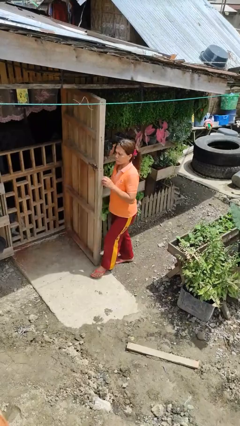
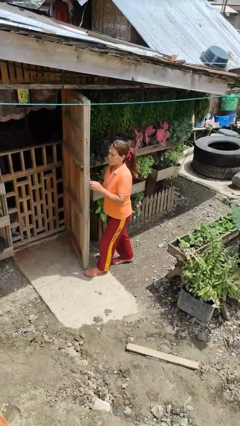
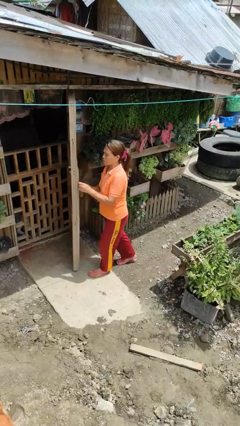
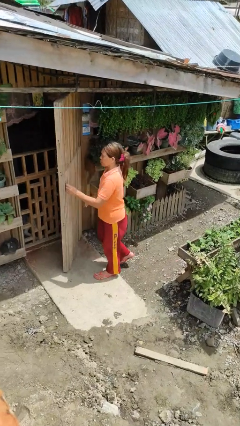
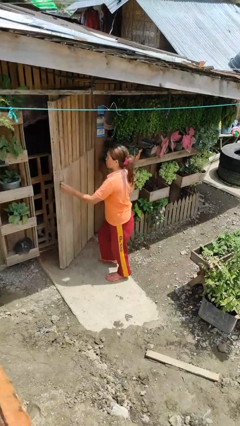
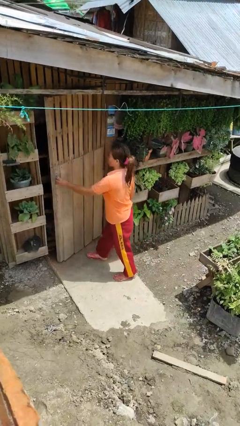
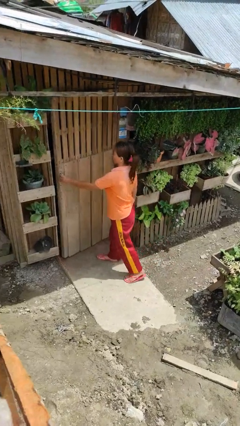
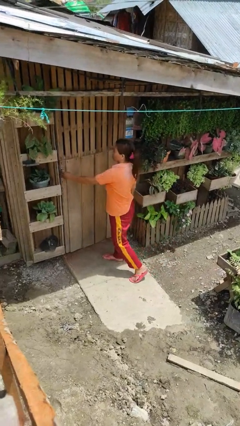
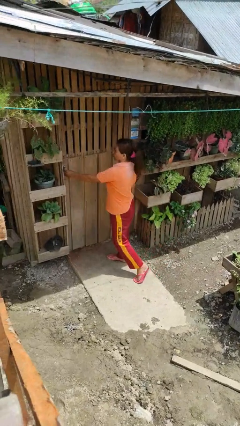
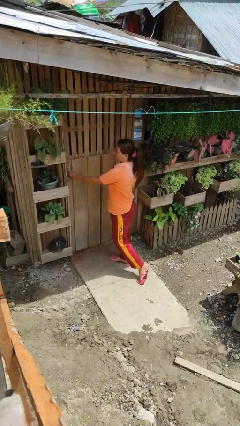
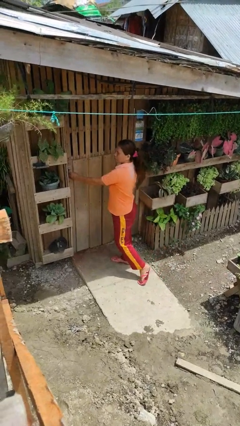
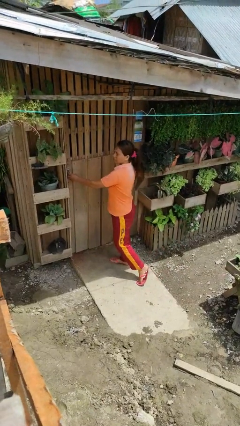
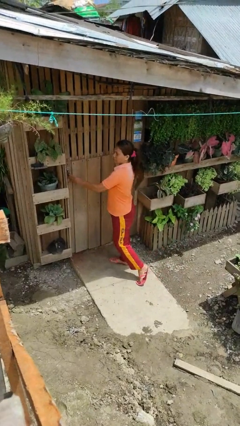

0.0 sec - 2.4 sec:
person closes facility door

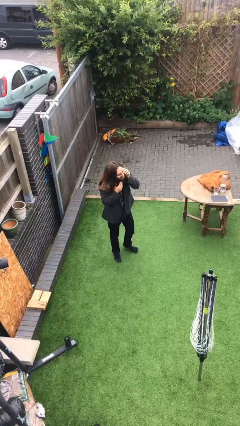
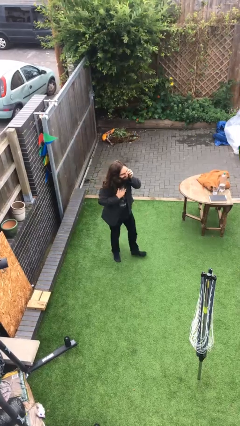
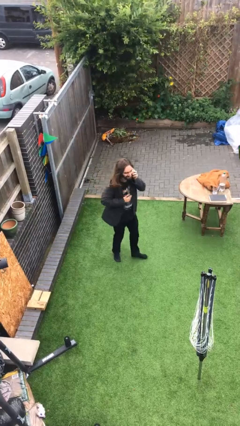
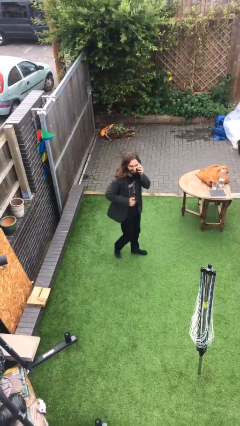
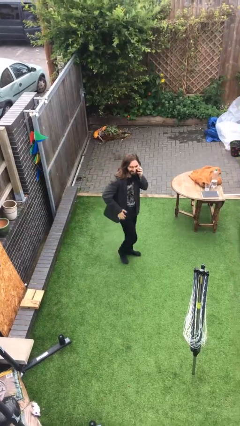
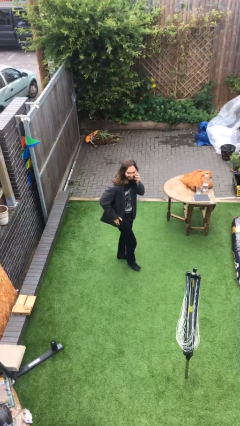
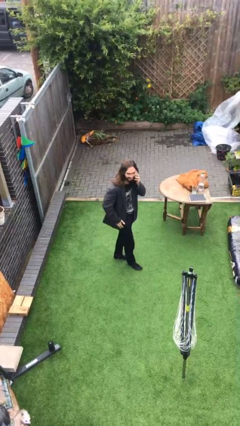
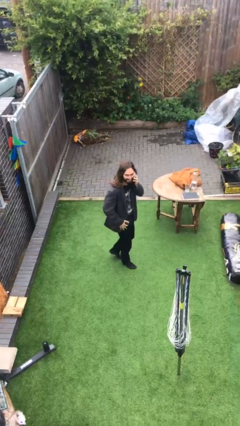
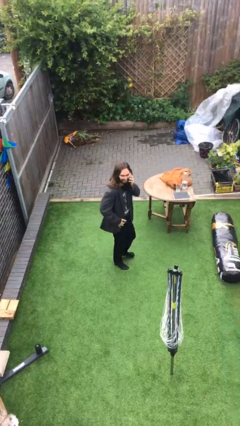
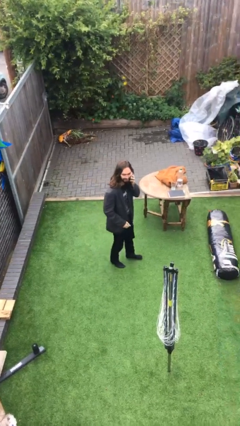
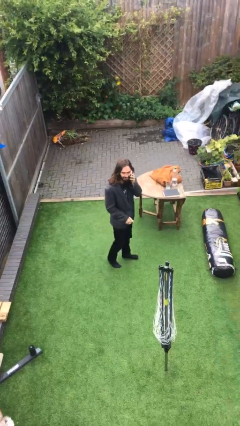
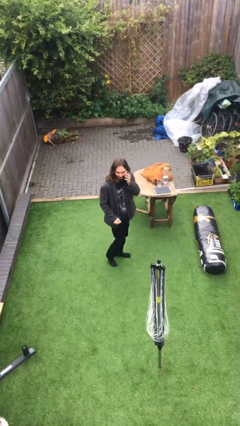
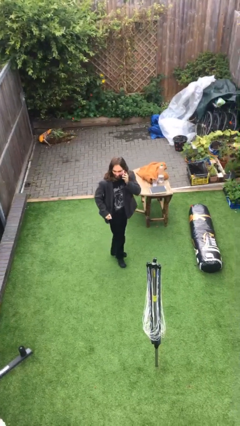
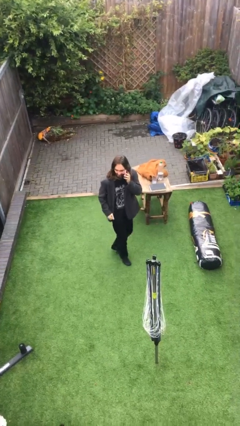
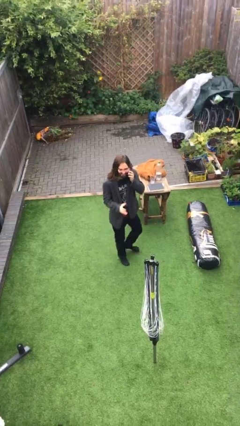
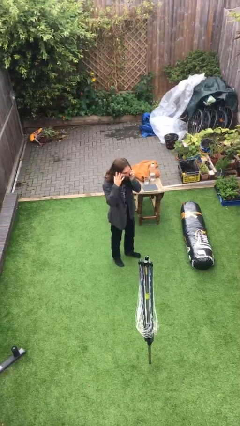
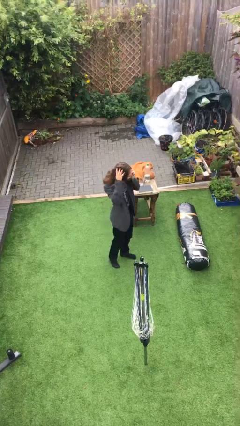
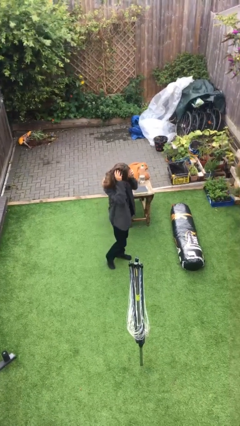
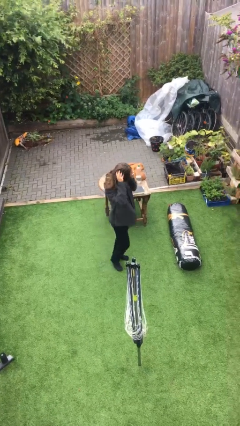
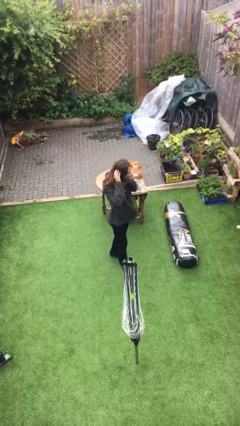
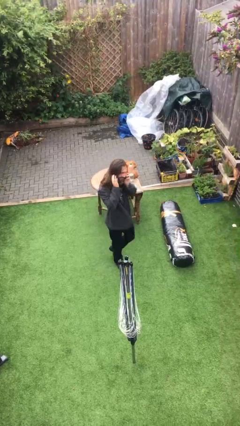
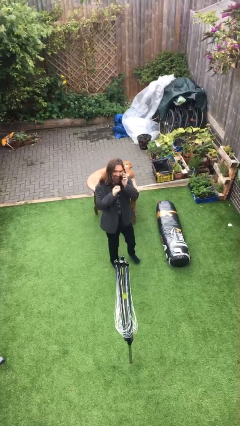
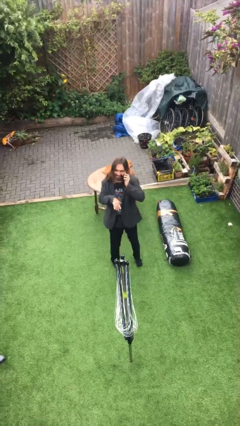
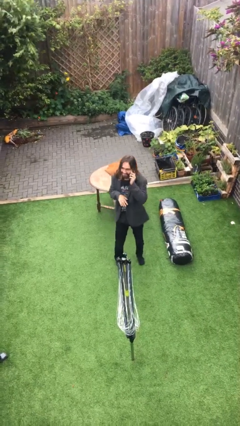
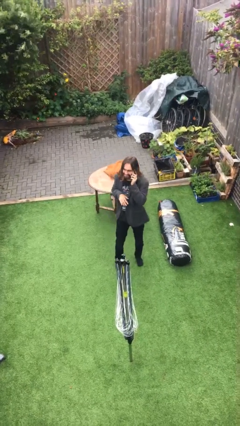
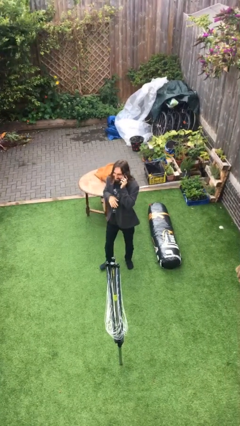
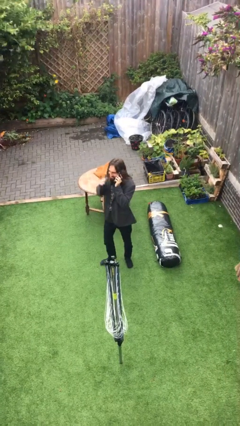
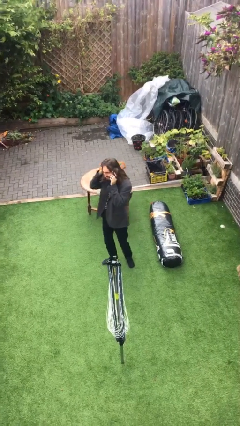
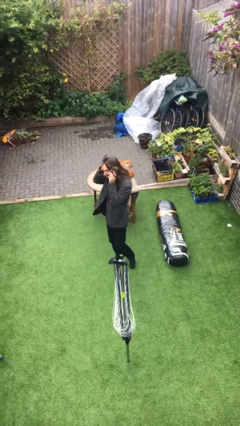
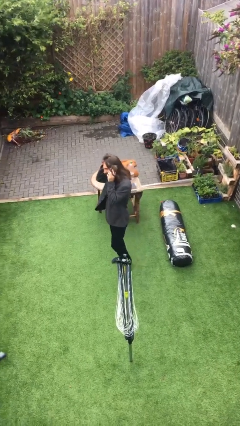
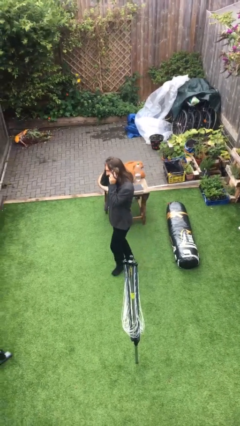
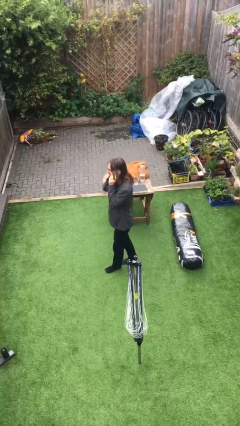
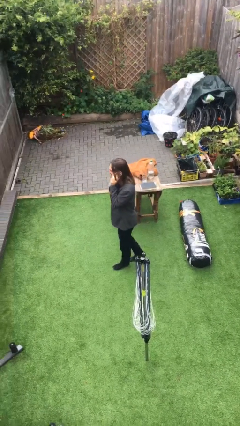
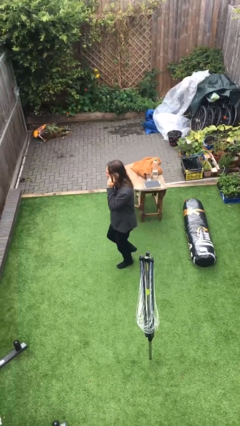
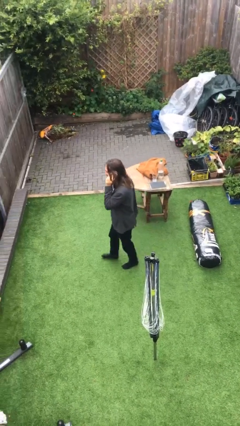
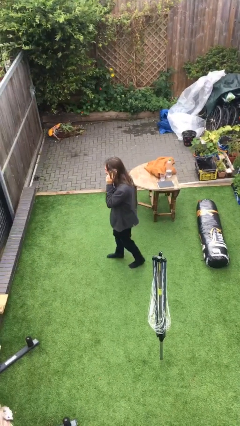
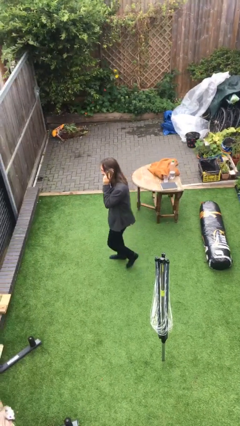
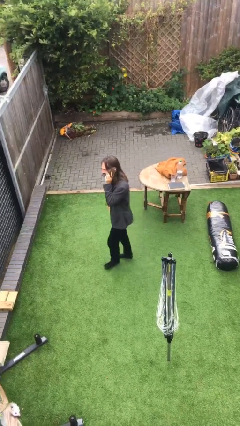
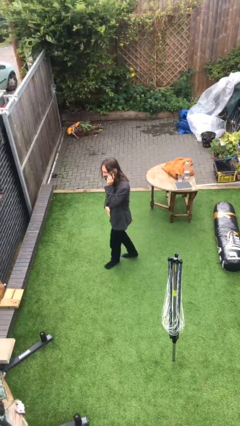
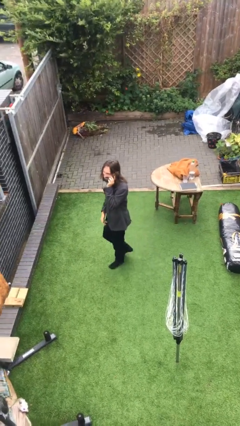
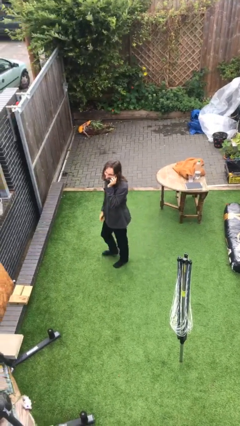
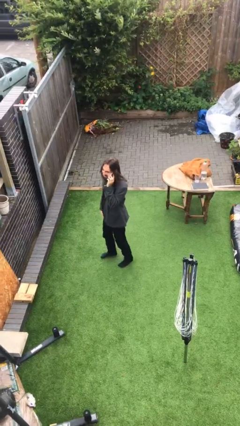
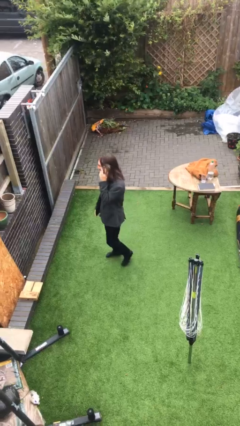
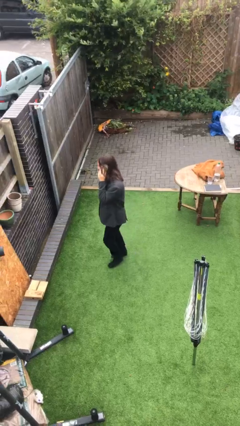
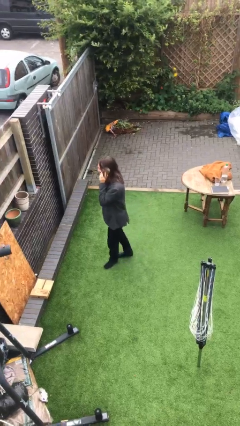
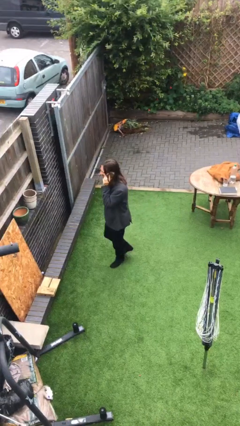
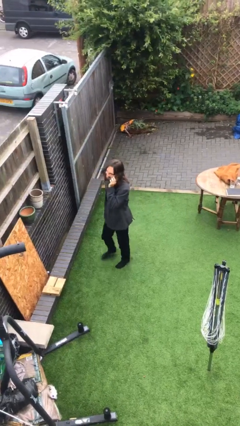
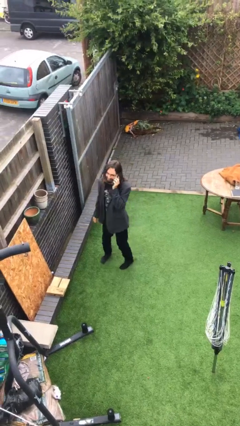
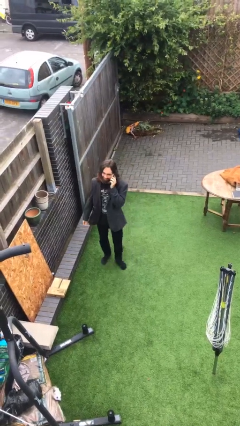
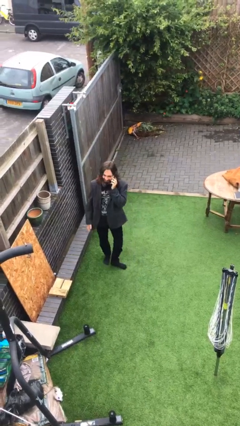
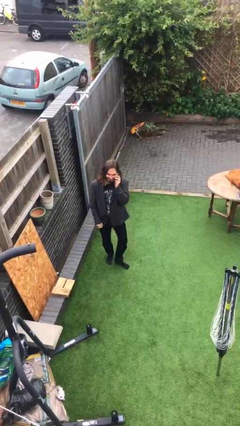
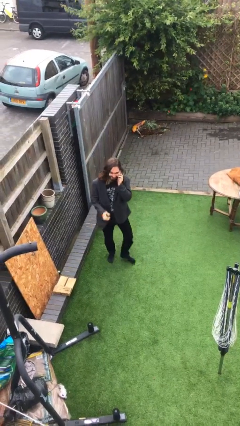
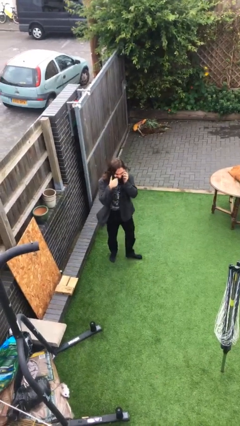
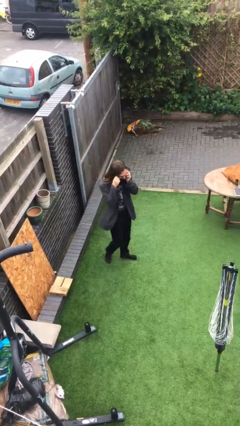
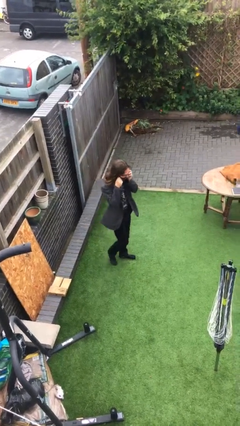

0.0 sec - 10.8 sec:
person talks on phone

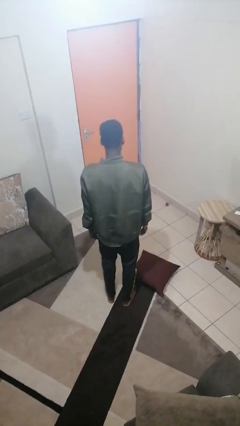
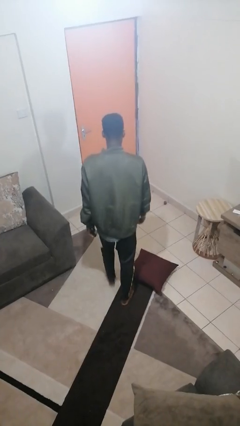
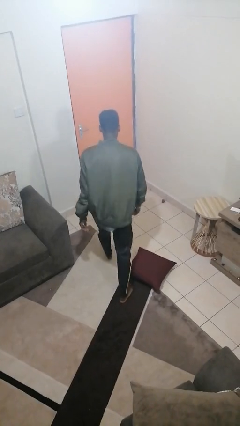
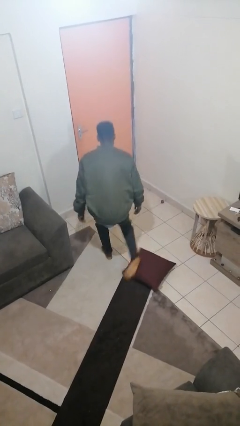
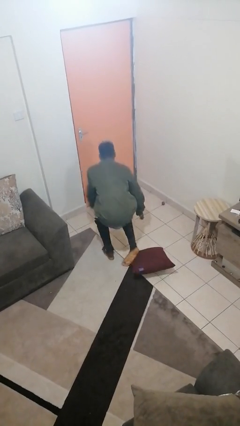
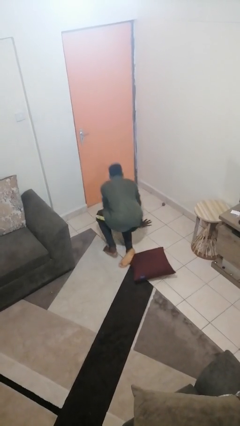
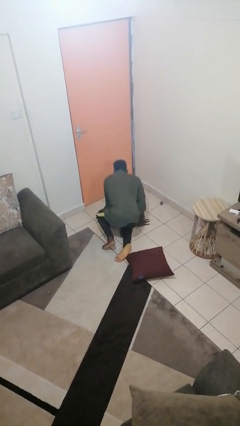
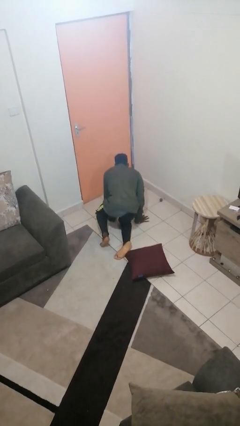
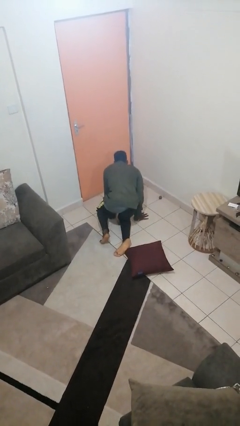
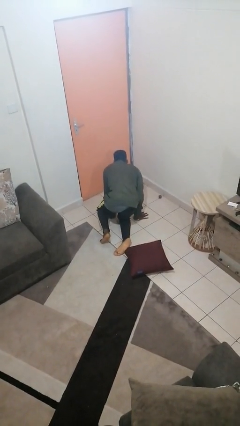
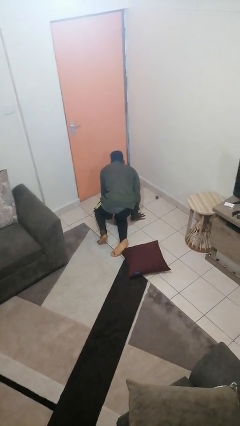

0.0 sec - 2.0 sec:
person trips on object on floor

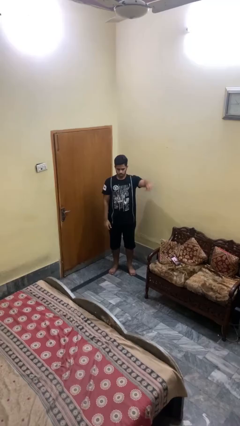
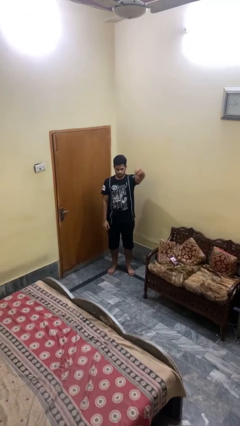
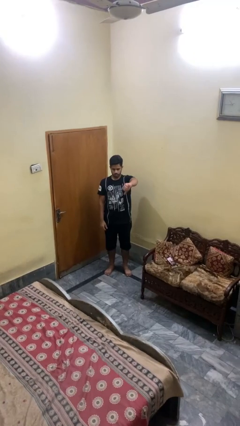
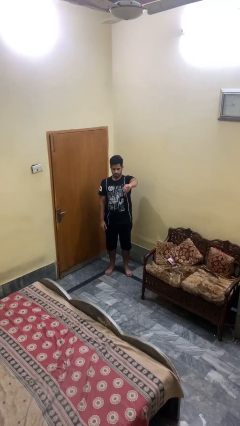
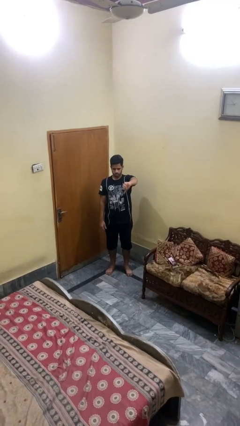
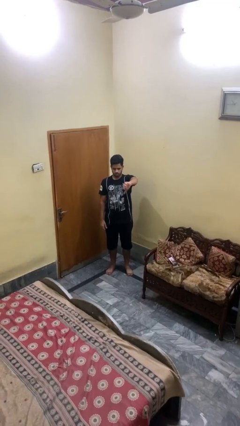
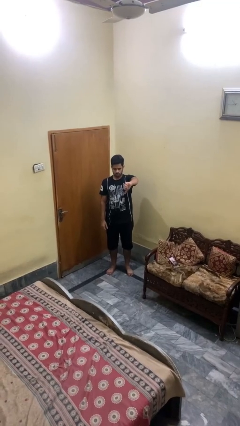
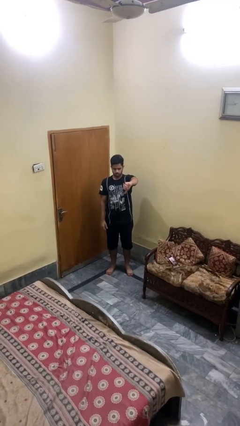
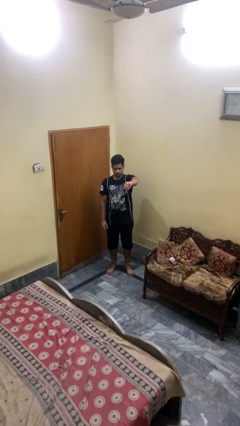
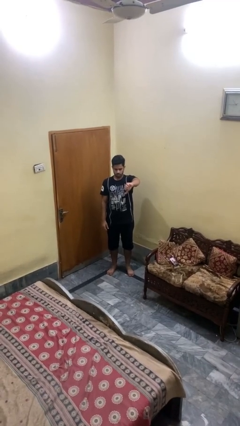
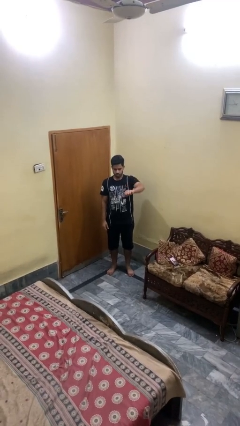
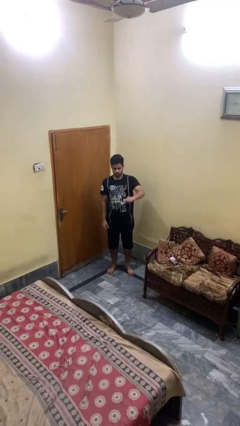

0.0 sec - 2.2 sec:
person gestures thumbs down

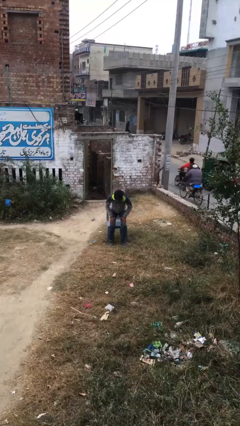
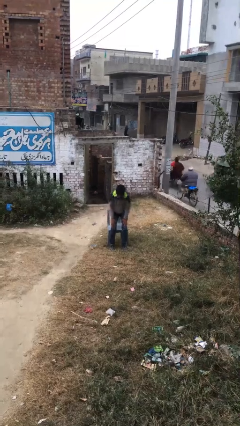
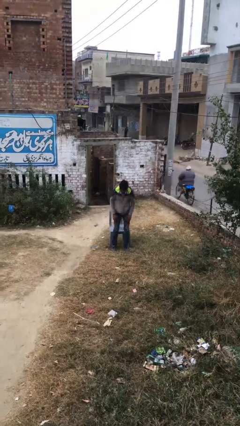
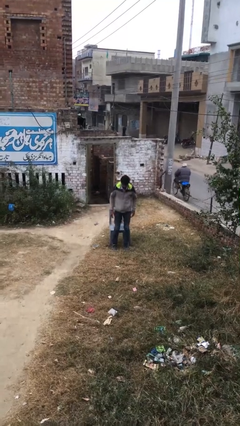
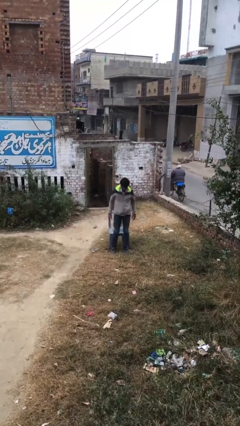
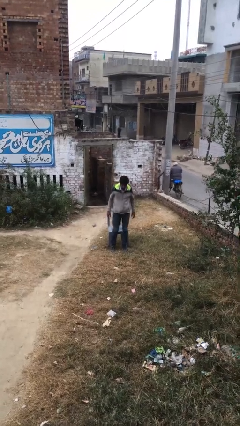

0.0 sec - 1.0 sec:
person stands up
